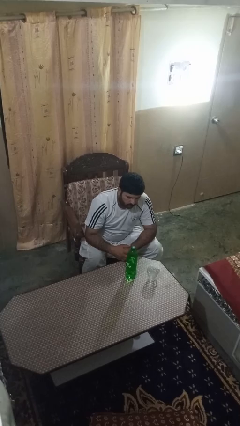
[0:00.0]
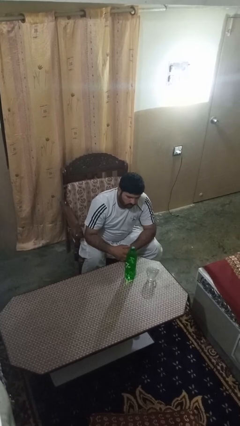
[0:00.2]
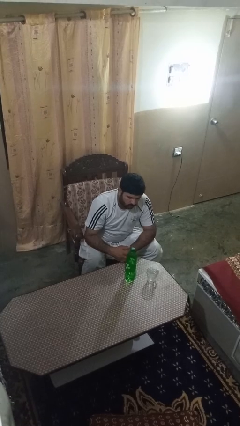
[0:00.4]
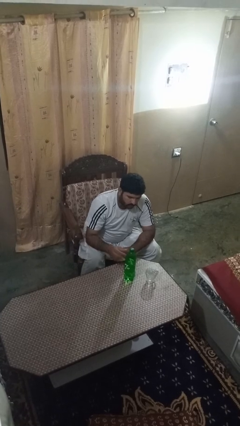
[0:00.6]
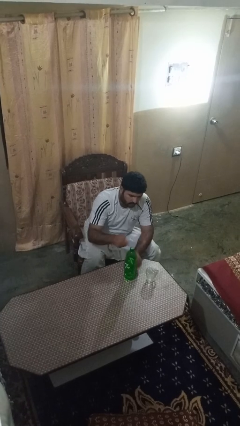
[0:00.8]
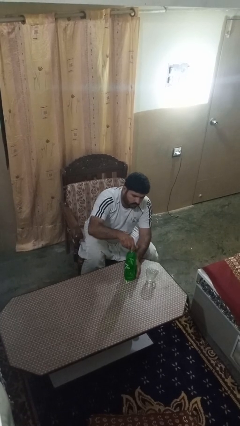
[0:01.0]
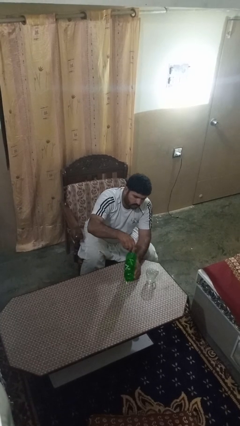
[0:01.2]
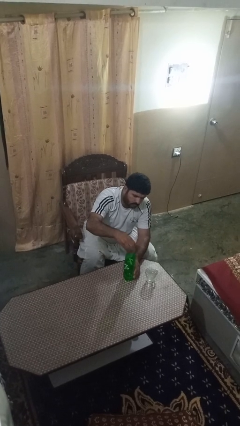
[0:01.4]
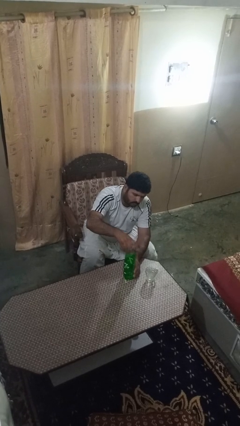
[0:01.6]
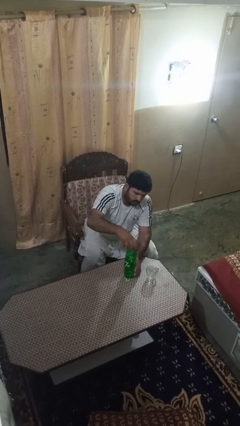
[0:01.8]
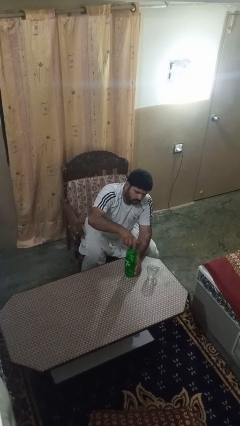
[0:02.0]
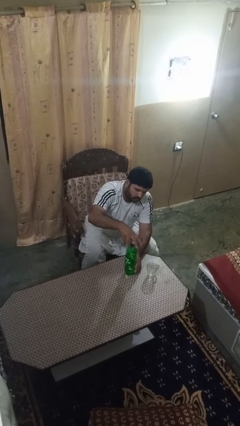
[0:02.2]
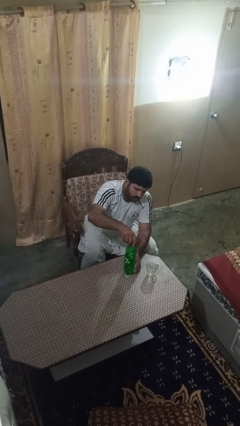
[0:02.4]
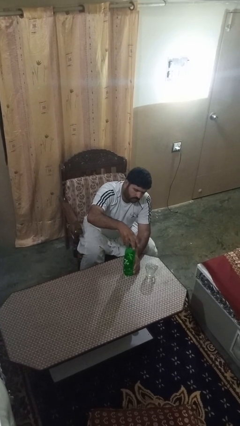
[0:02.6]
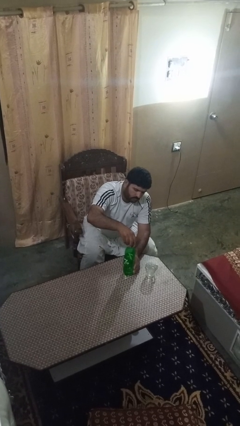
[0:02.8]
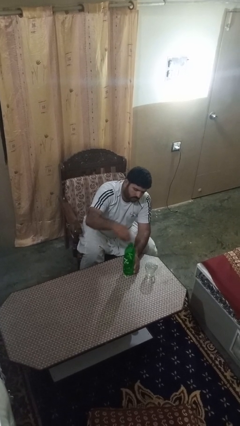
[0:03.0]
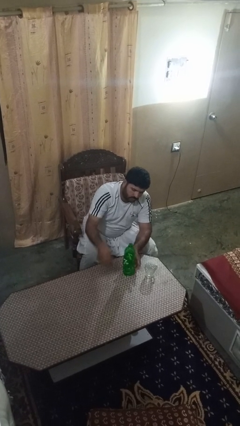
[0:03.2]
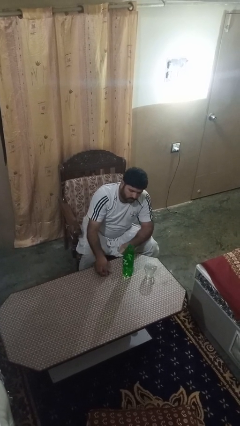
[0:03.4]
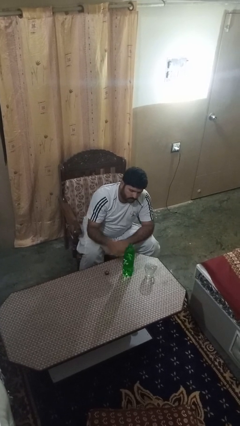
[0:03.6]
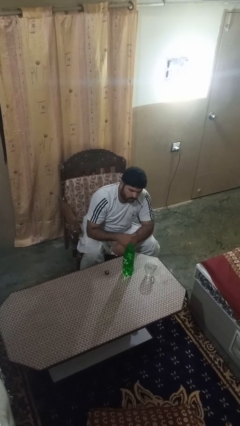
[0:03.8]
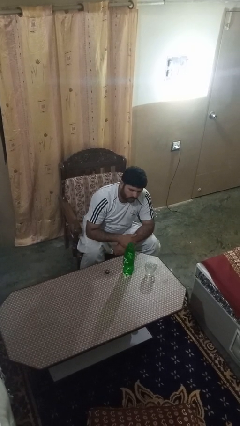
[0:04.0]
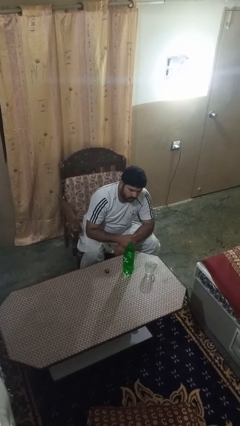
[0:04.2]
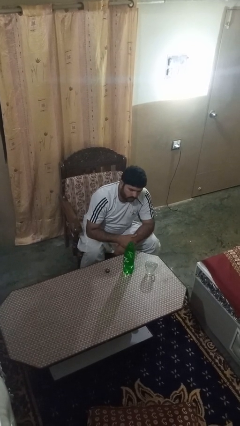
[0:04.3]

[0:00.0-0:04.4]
person unscrews lid from bottle

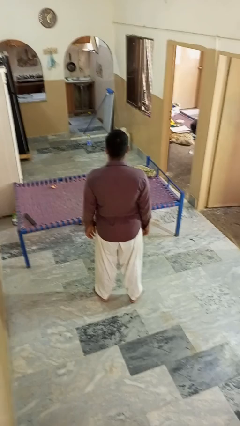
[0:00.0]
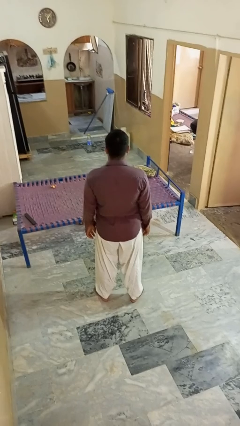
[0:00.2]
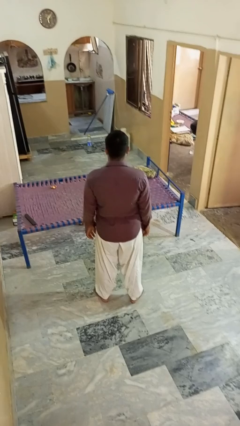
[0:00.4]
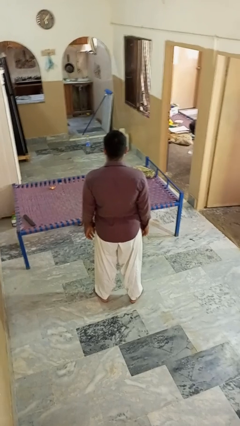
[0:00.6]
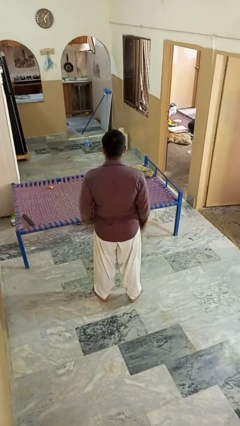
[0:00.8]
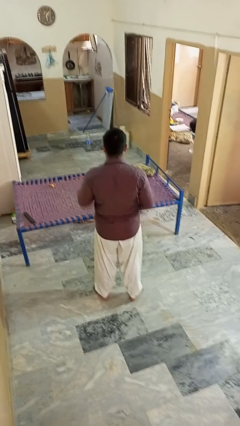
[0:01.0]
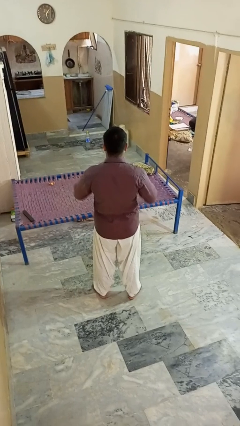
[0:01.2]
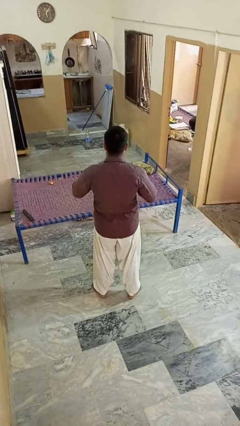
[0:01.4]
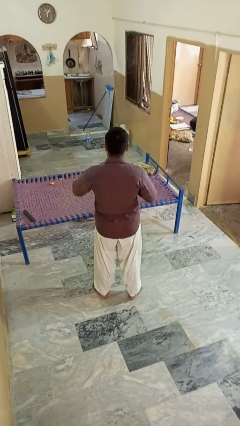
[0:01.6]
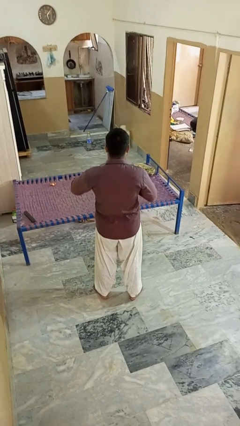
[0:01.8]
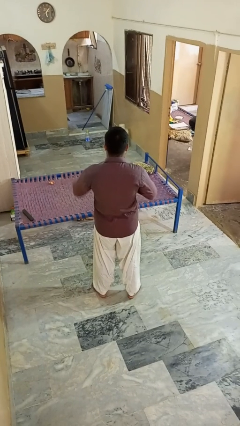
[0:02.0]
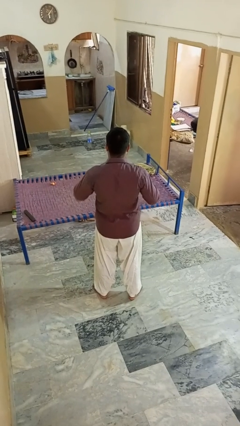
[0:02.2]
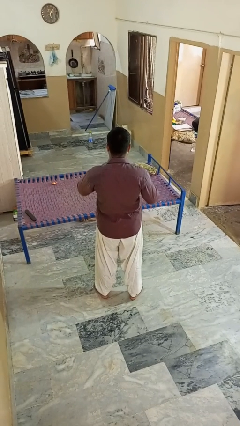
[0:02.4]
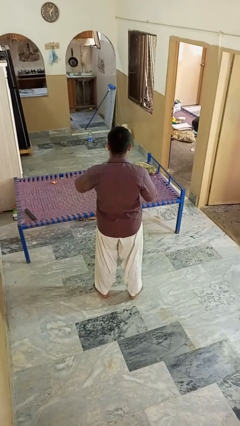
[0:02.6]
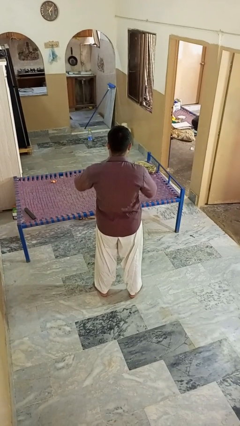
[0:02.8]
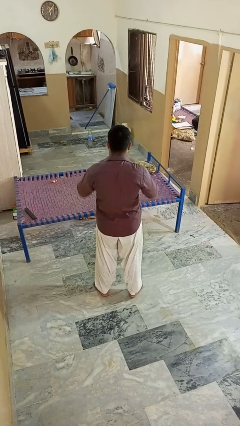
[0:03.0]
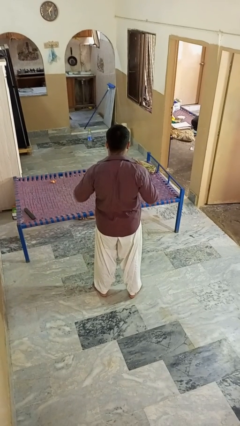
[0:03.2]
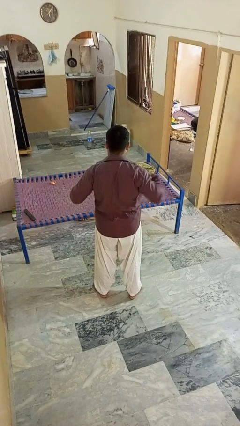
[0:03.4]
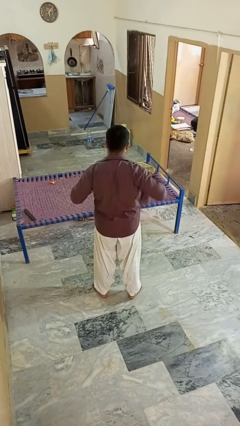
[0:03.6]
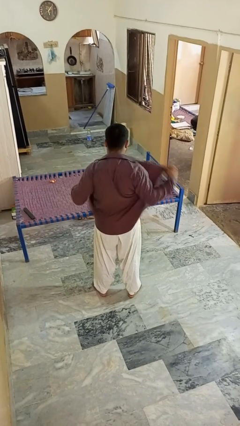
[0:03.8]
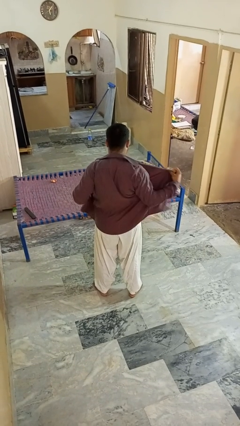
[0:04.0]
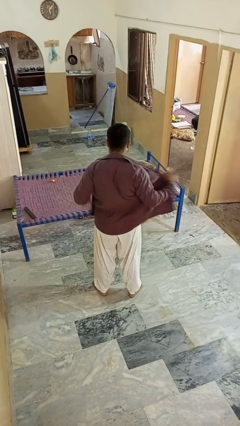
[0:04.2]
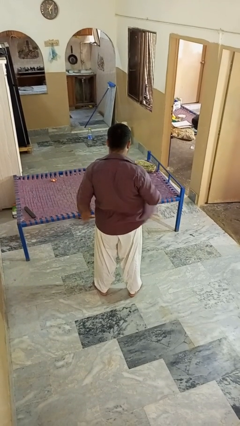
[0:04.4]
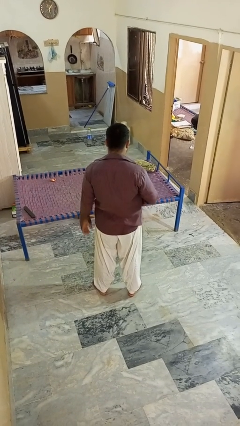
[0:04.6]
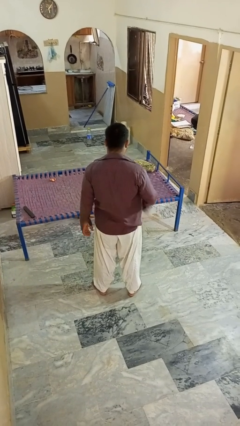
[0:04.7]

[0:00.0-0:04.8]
person unbuttons shirt

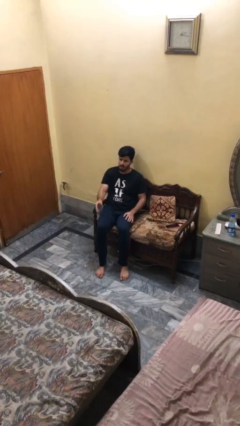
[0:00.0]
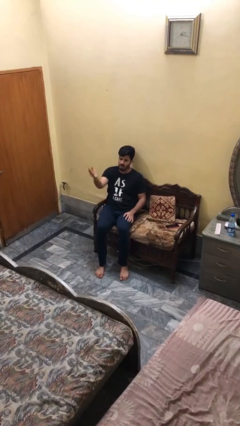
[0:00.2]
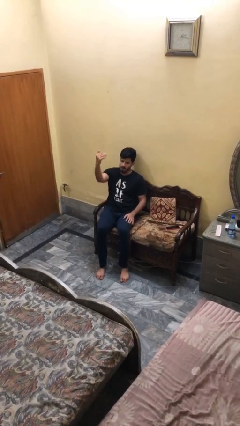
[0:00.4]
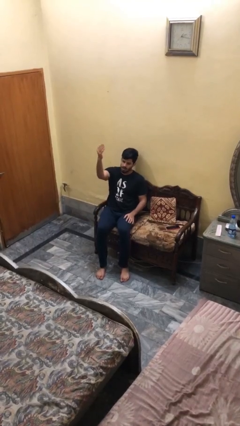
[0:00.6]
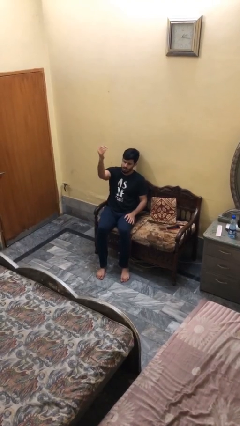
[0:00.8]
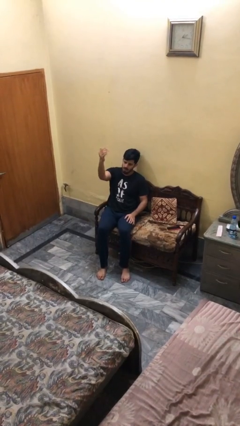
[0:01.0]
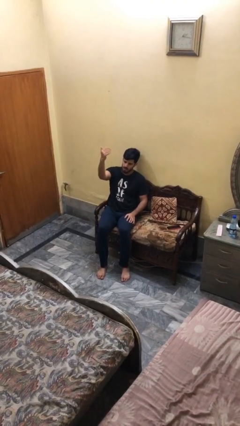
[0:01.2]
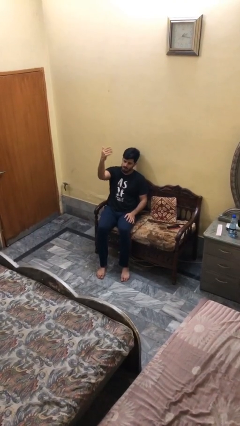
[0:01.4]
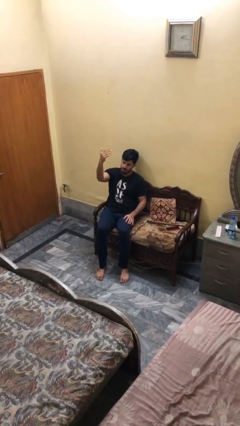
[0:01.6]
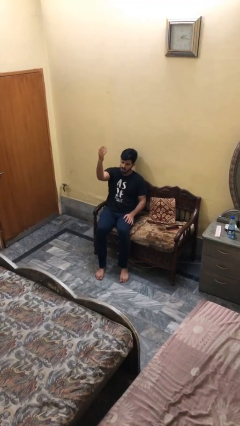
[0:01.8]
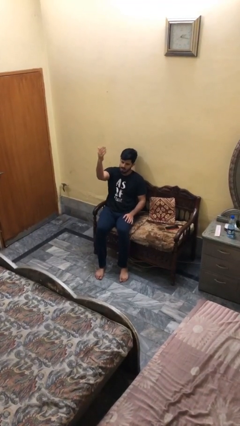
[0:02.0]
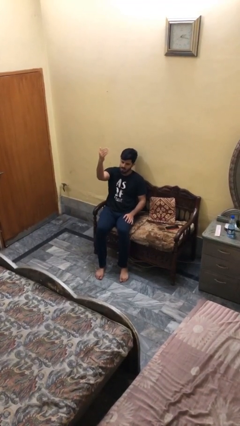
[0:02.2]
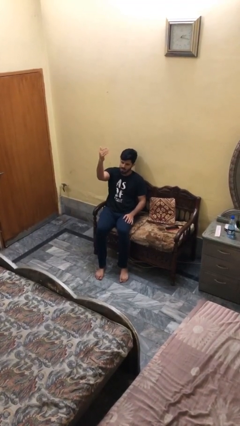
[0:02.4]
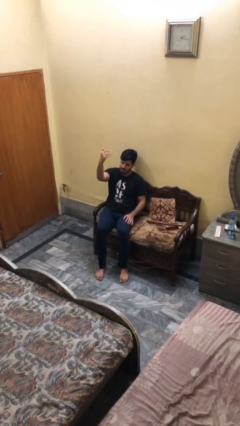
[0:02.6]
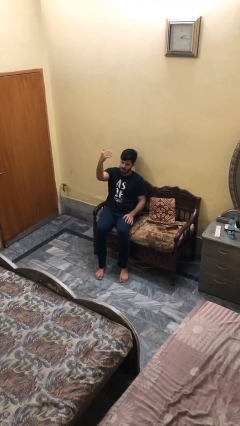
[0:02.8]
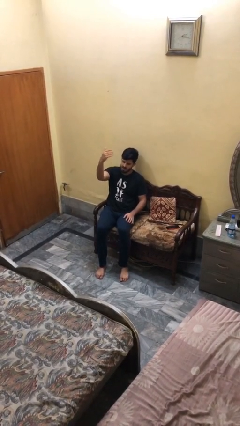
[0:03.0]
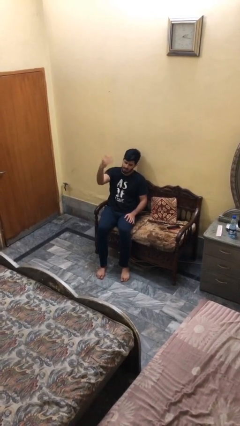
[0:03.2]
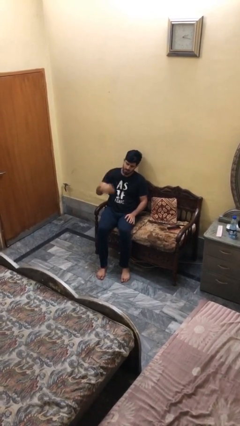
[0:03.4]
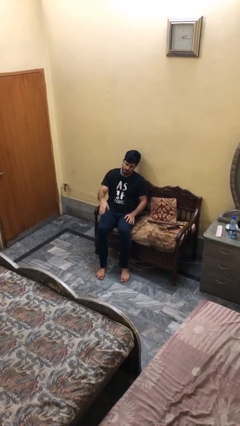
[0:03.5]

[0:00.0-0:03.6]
person gestures come here

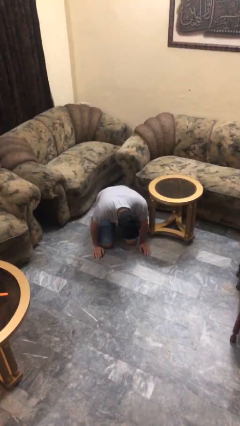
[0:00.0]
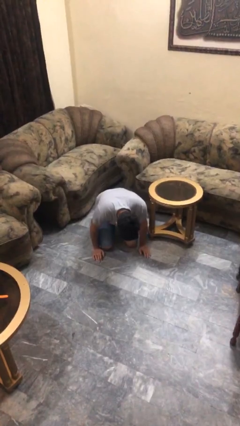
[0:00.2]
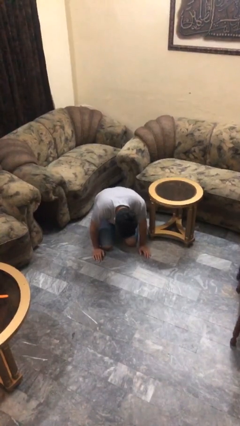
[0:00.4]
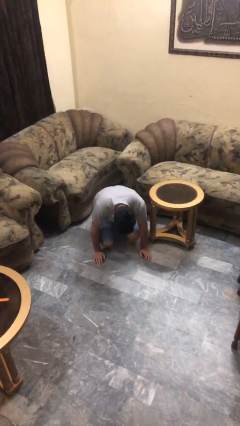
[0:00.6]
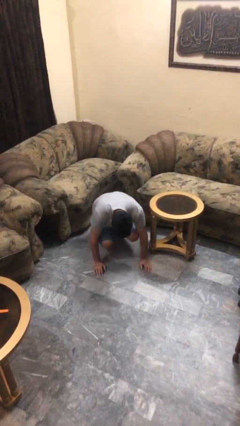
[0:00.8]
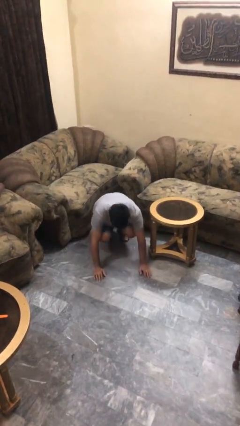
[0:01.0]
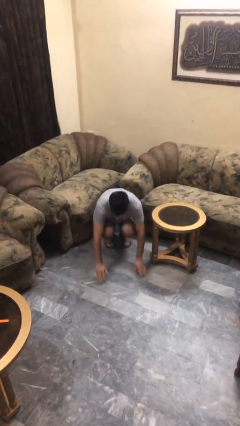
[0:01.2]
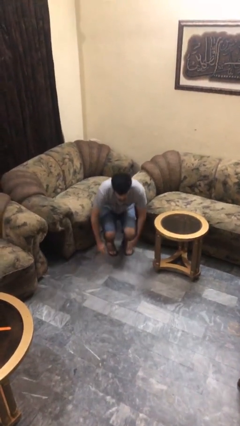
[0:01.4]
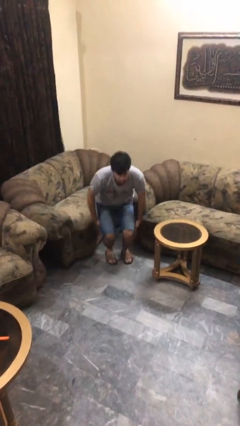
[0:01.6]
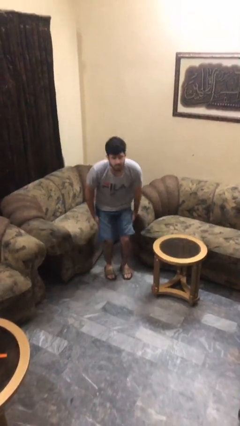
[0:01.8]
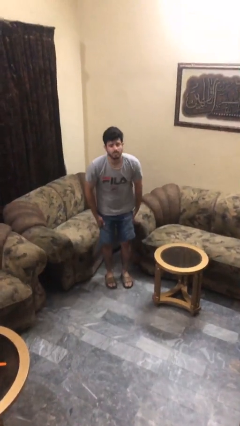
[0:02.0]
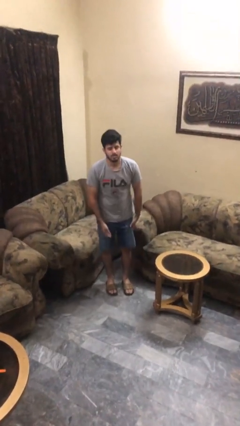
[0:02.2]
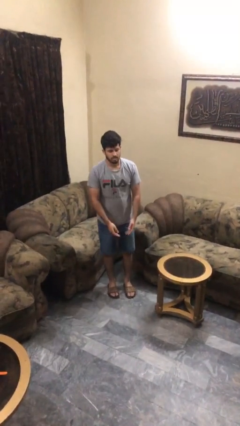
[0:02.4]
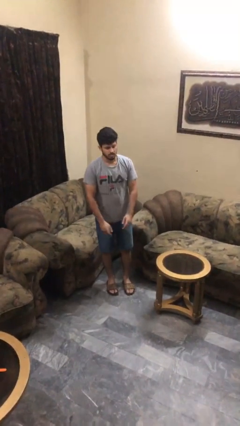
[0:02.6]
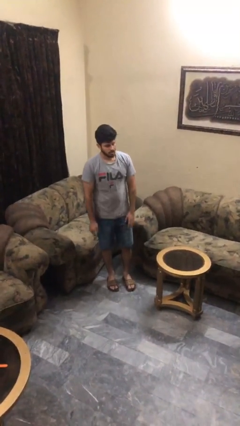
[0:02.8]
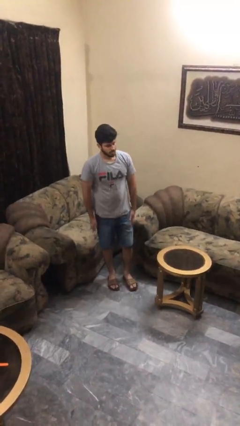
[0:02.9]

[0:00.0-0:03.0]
person stands up from floor

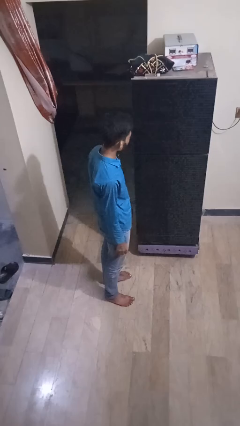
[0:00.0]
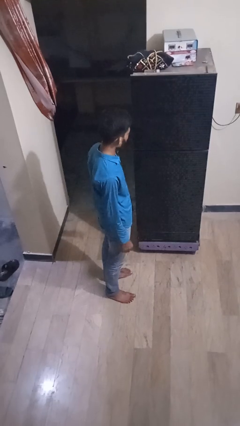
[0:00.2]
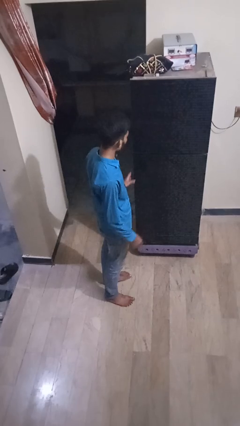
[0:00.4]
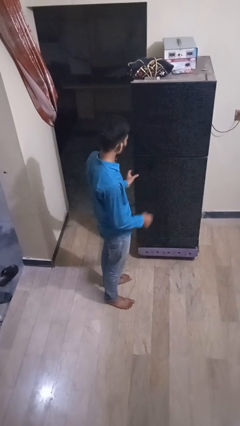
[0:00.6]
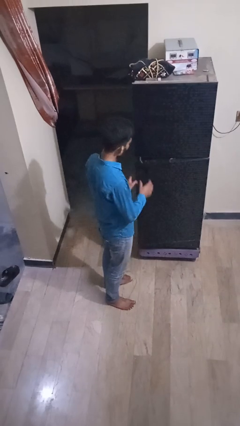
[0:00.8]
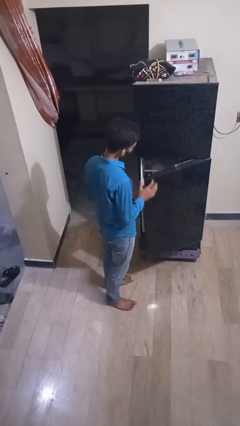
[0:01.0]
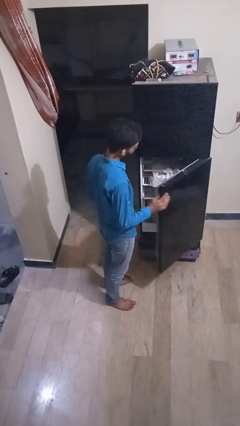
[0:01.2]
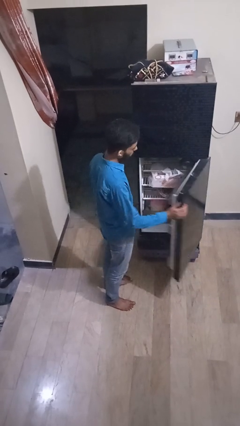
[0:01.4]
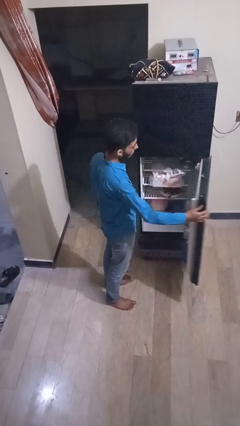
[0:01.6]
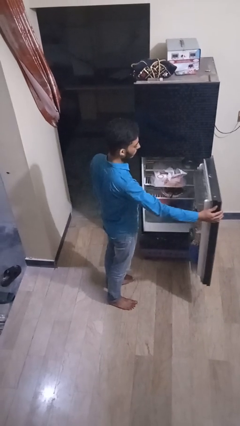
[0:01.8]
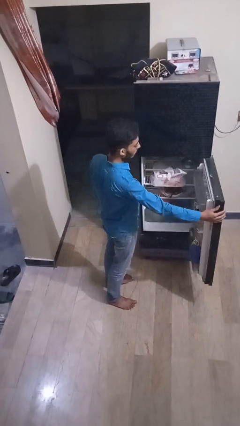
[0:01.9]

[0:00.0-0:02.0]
person opens refrigerator
